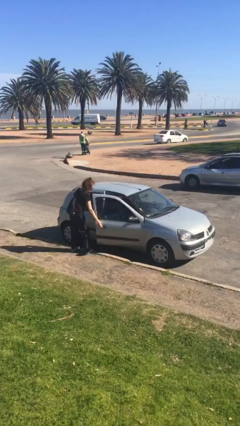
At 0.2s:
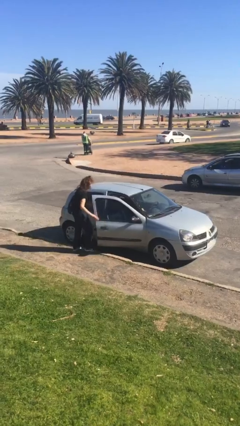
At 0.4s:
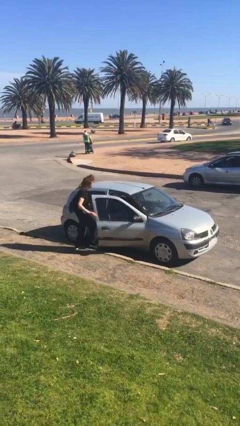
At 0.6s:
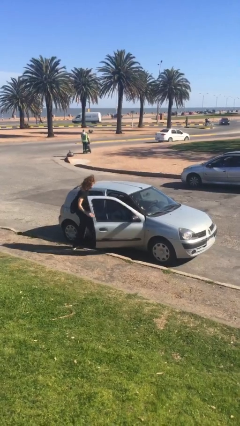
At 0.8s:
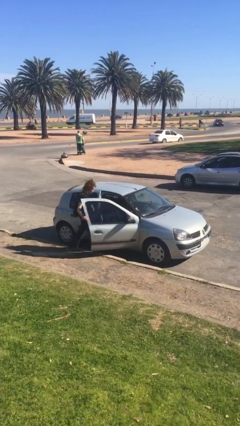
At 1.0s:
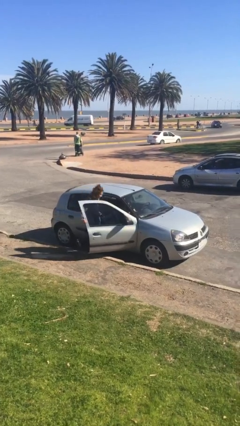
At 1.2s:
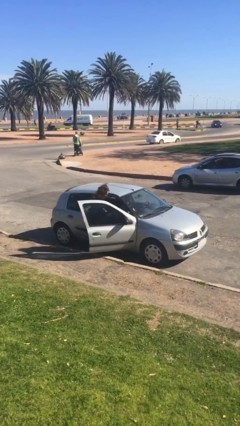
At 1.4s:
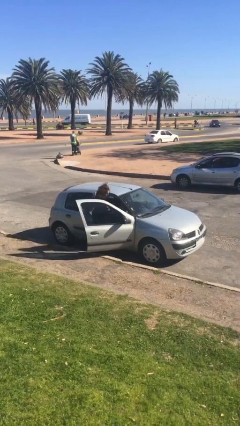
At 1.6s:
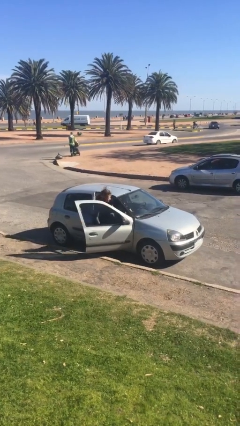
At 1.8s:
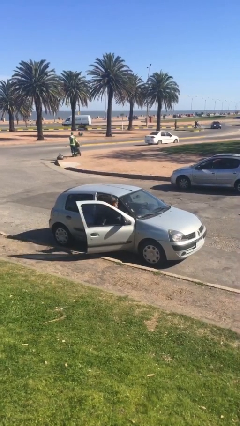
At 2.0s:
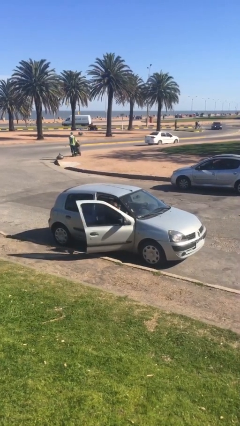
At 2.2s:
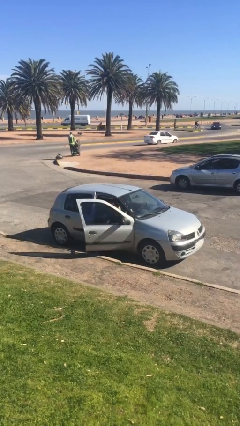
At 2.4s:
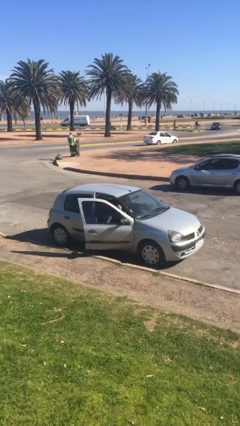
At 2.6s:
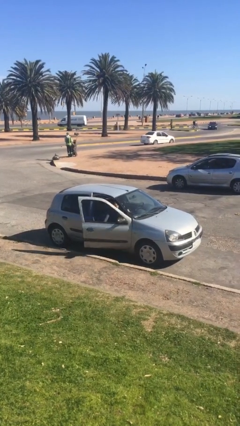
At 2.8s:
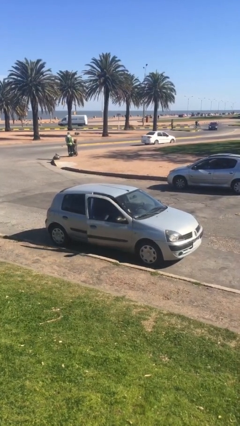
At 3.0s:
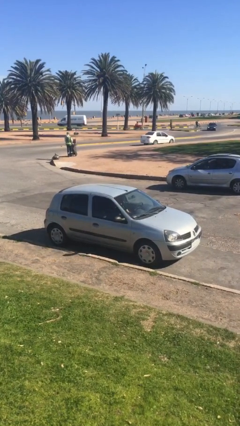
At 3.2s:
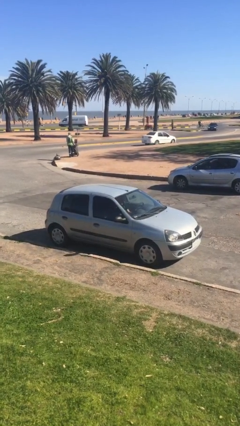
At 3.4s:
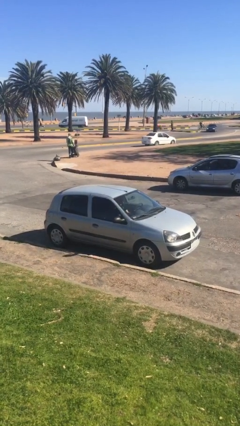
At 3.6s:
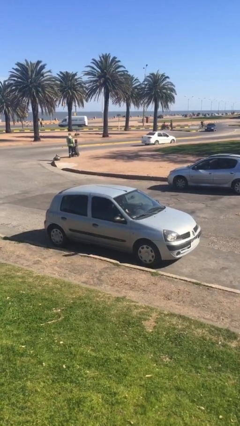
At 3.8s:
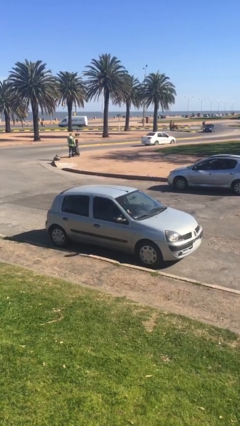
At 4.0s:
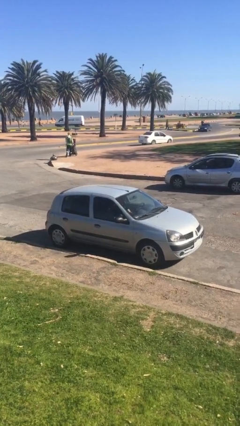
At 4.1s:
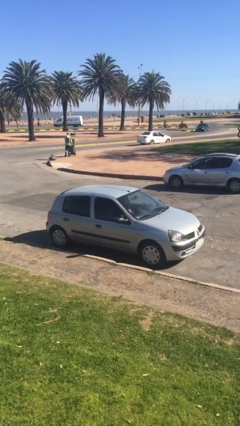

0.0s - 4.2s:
car picks up person

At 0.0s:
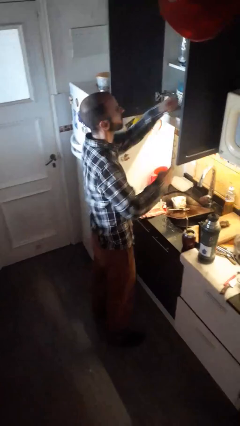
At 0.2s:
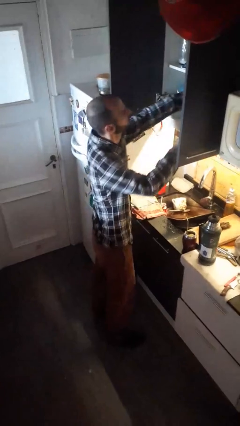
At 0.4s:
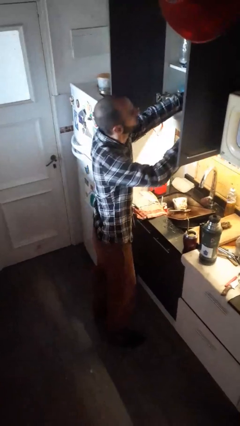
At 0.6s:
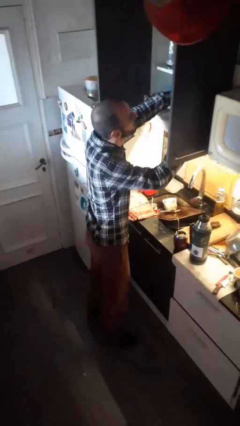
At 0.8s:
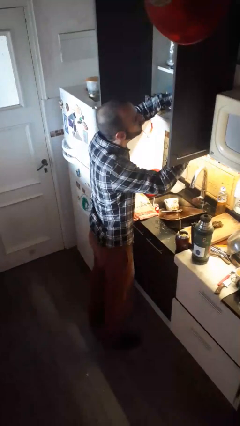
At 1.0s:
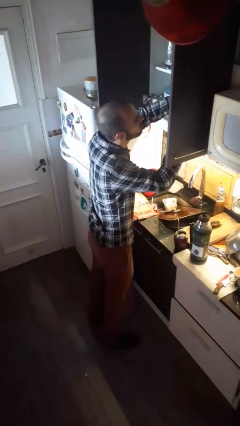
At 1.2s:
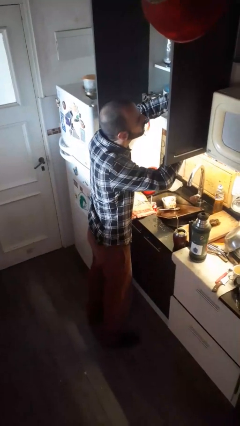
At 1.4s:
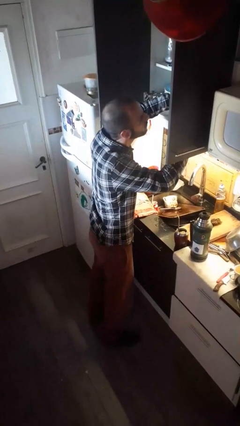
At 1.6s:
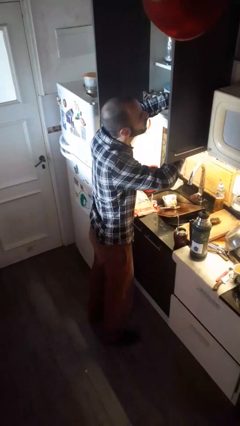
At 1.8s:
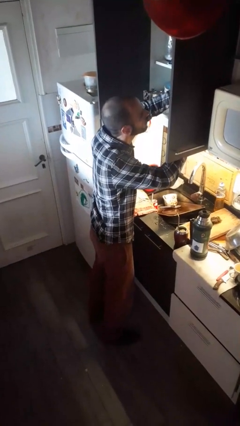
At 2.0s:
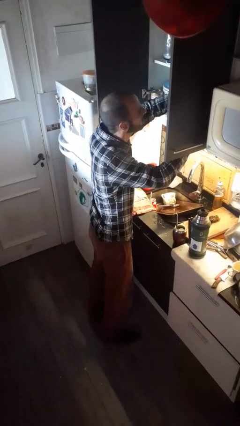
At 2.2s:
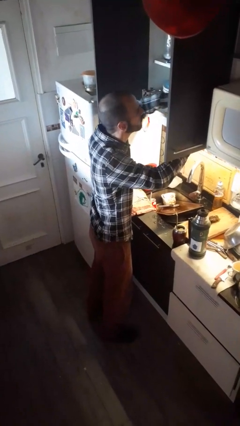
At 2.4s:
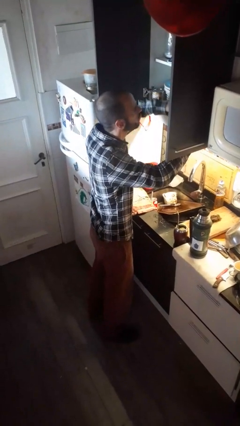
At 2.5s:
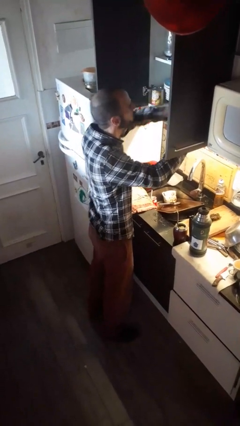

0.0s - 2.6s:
person searches in kitchen drawer

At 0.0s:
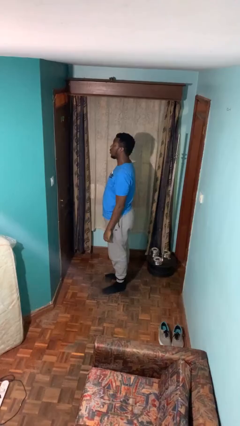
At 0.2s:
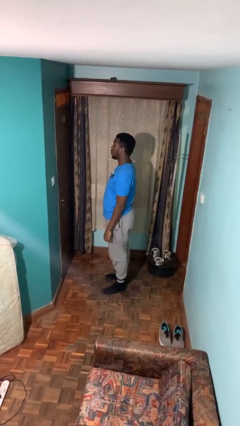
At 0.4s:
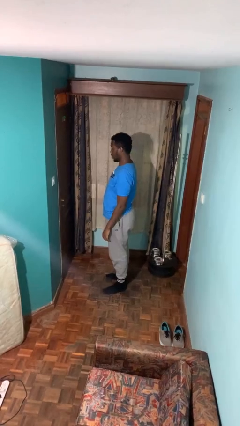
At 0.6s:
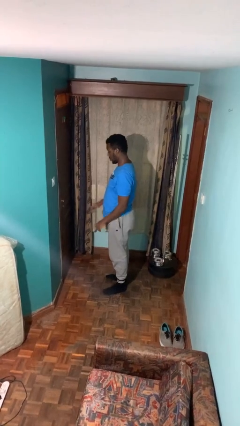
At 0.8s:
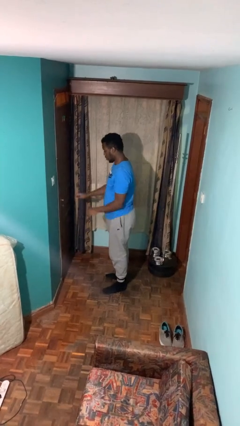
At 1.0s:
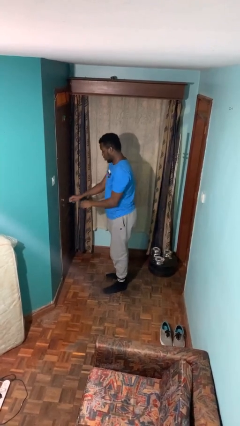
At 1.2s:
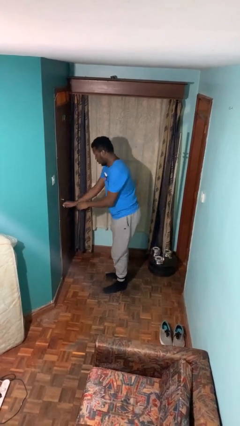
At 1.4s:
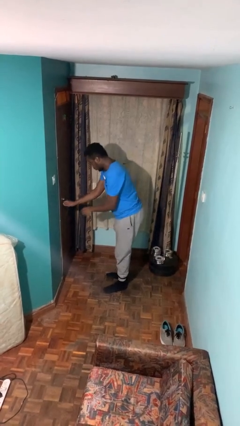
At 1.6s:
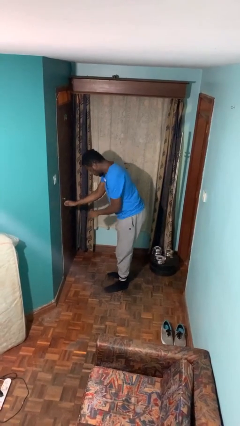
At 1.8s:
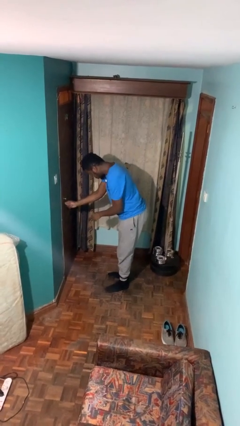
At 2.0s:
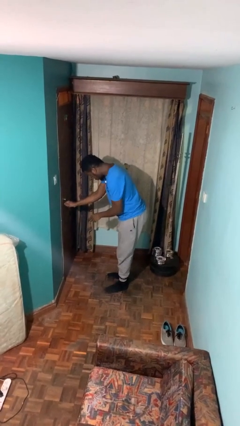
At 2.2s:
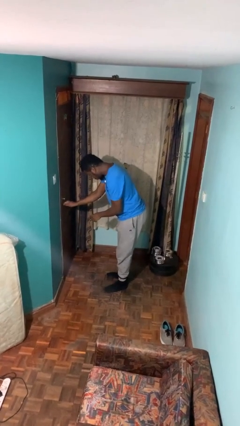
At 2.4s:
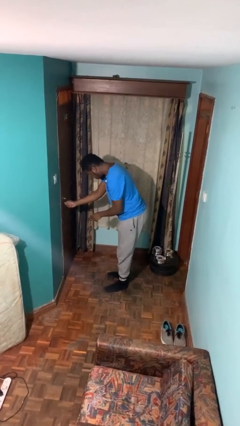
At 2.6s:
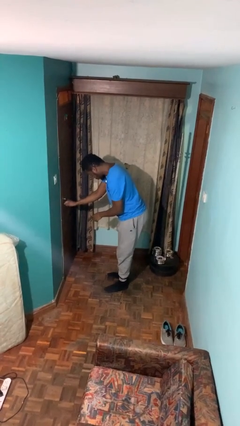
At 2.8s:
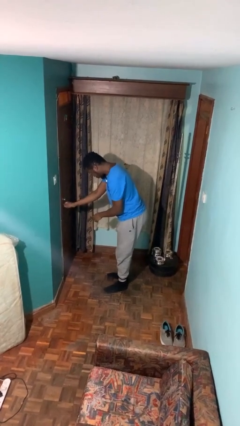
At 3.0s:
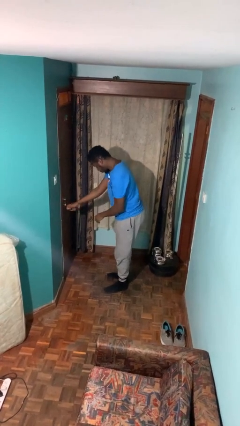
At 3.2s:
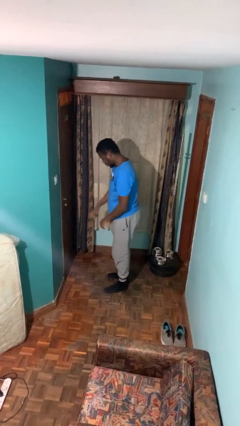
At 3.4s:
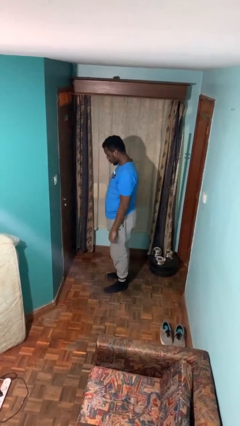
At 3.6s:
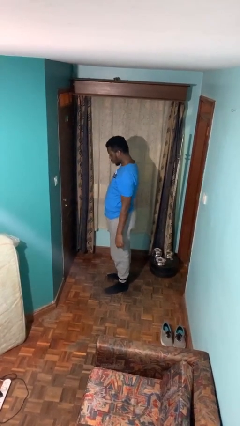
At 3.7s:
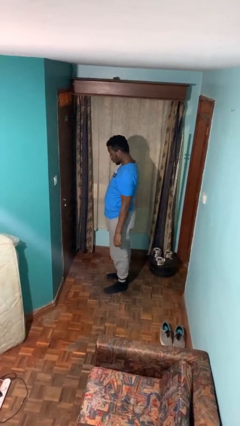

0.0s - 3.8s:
person unlocks door with keys

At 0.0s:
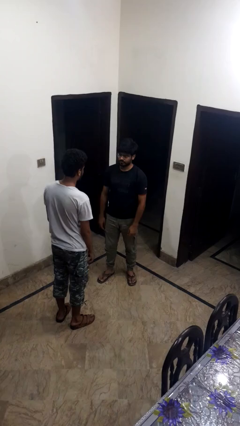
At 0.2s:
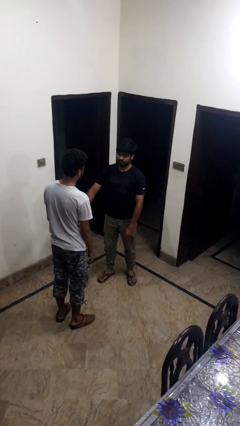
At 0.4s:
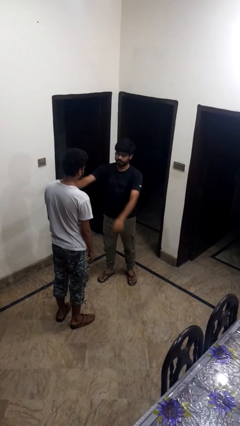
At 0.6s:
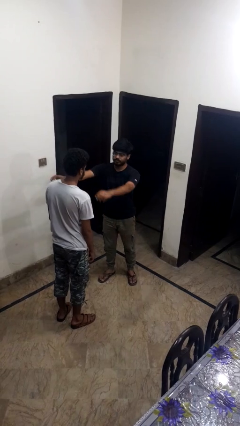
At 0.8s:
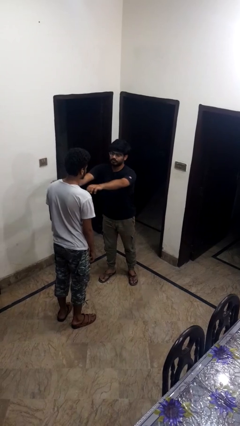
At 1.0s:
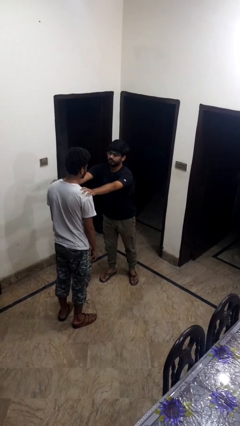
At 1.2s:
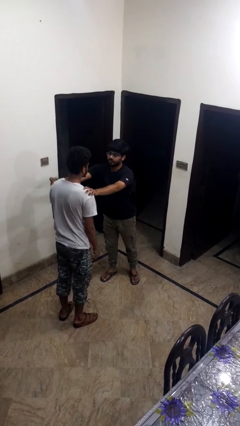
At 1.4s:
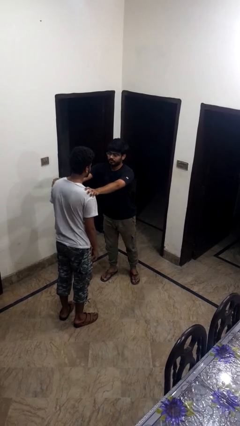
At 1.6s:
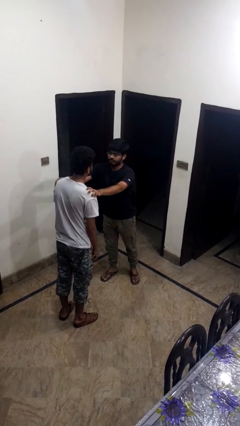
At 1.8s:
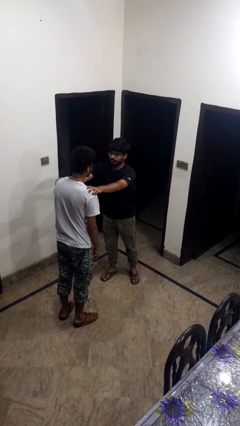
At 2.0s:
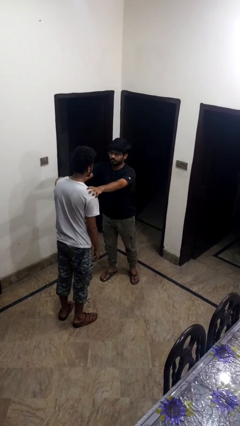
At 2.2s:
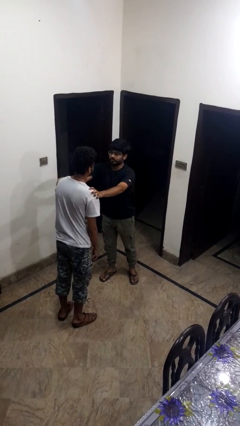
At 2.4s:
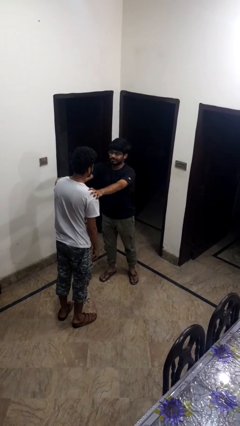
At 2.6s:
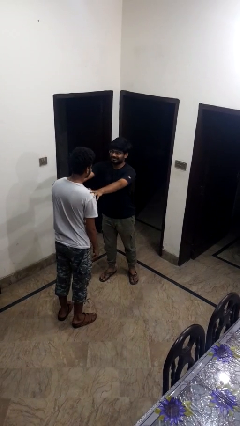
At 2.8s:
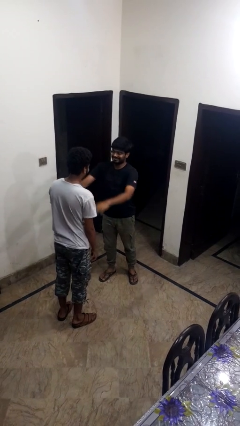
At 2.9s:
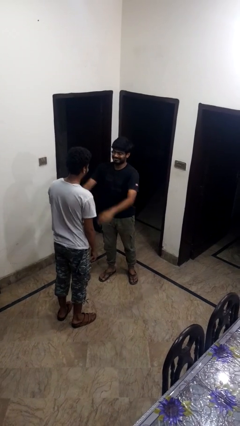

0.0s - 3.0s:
person kisses cheek of person

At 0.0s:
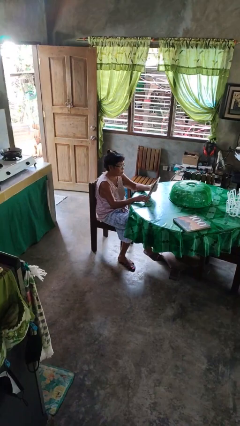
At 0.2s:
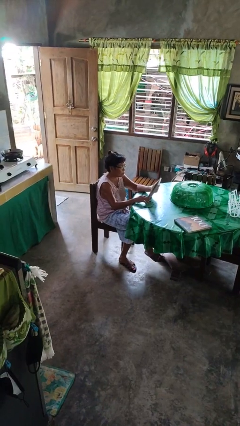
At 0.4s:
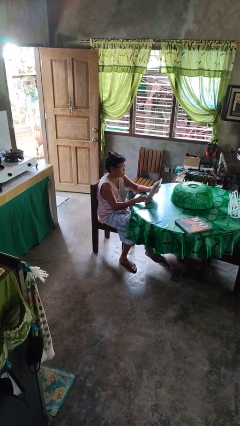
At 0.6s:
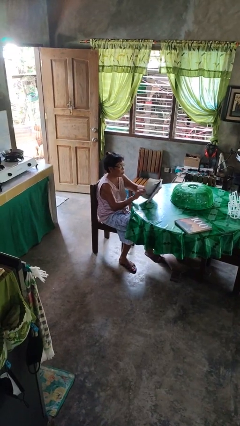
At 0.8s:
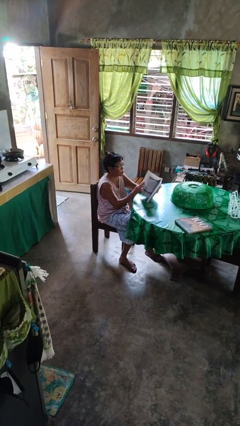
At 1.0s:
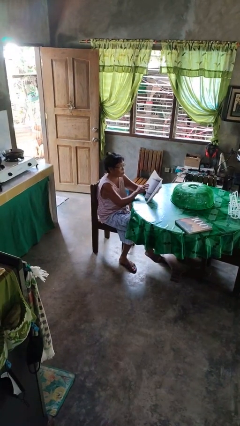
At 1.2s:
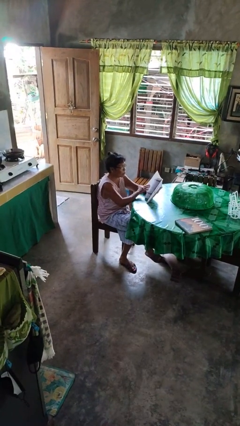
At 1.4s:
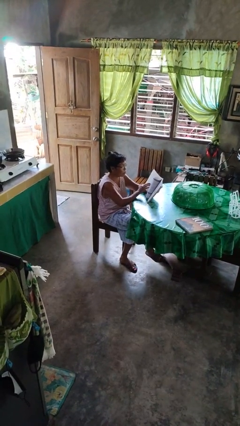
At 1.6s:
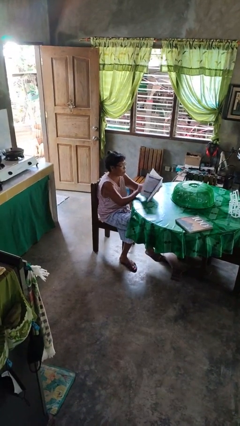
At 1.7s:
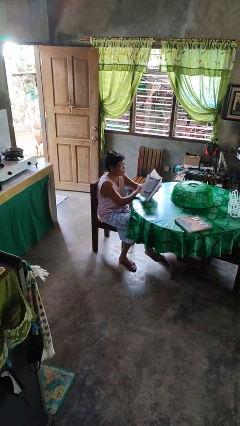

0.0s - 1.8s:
person reads magazine

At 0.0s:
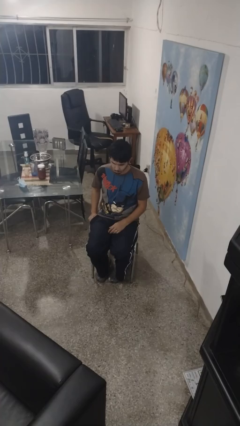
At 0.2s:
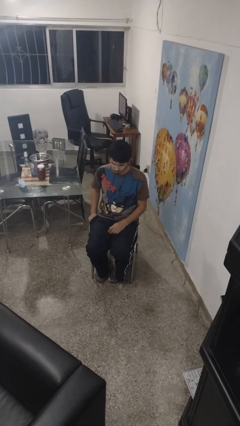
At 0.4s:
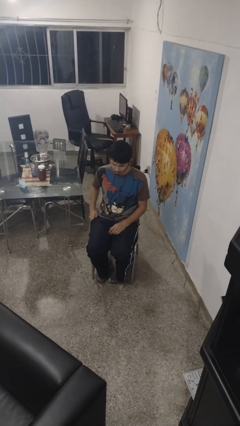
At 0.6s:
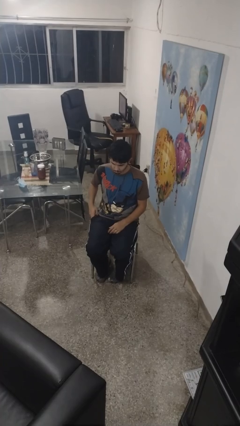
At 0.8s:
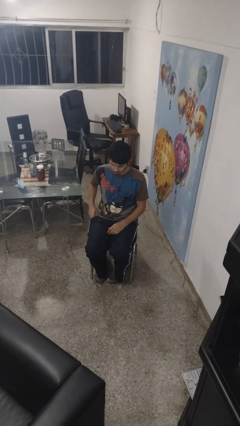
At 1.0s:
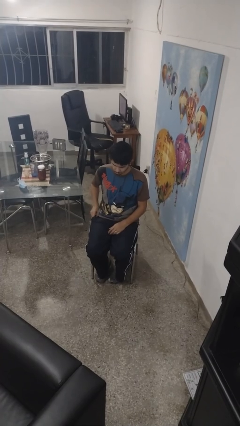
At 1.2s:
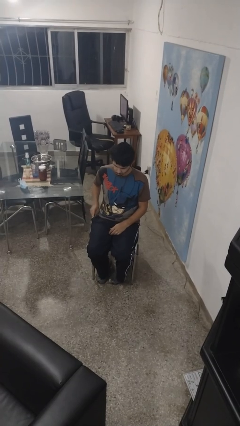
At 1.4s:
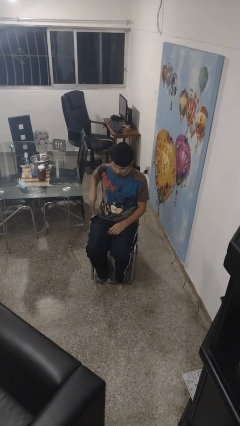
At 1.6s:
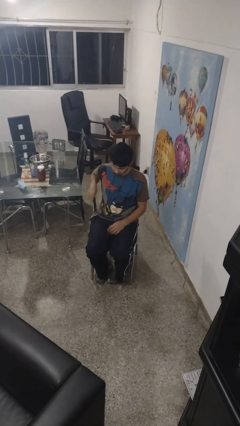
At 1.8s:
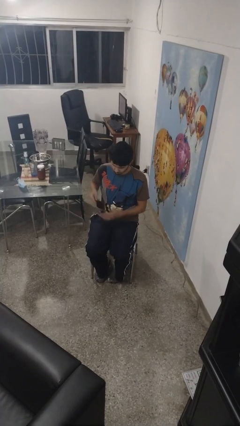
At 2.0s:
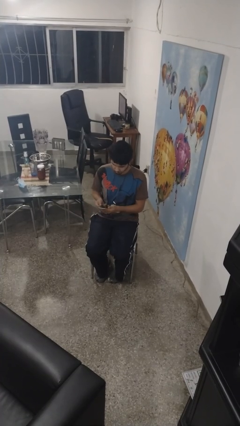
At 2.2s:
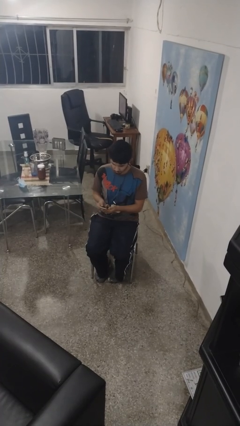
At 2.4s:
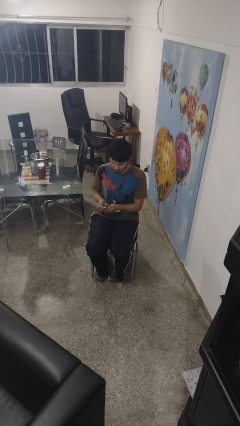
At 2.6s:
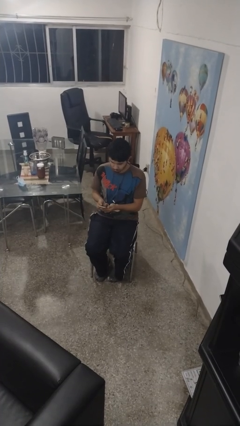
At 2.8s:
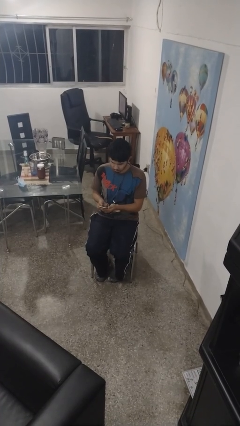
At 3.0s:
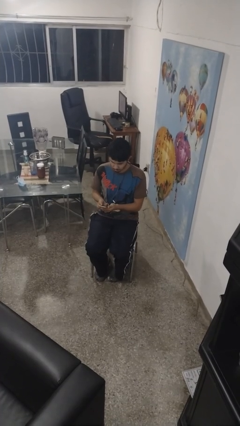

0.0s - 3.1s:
person takes phone from pocket
